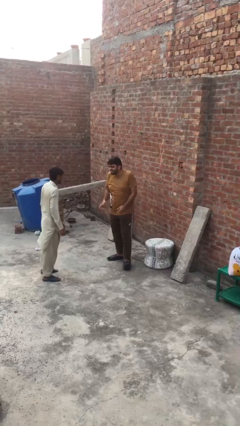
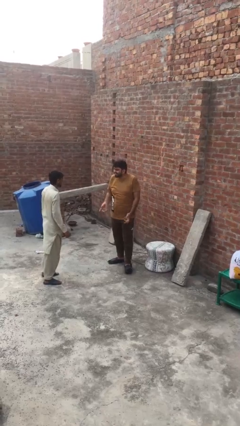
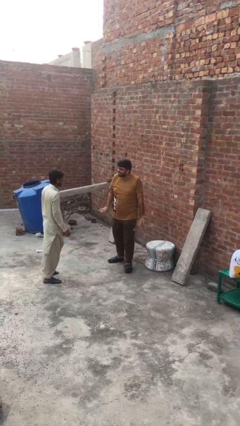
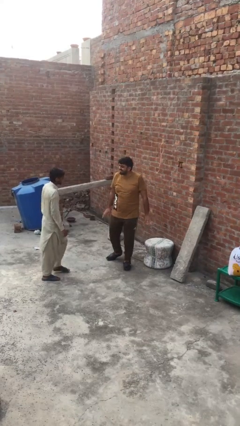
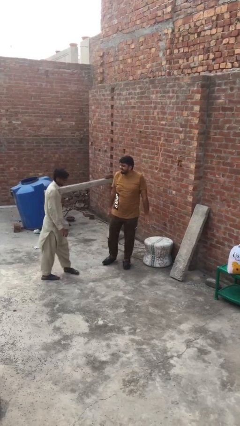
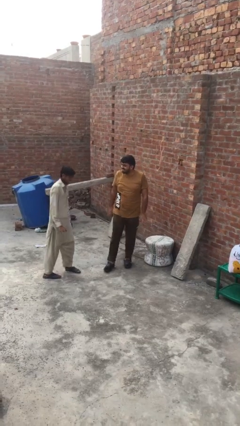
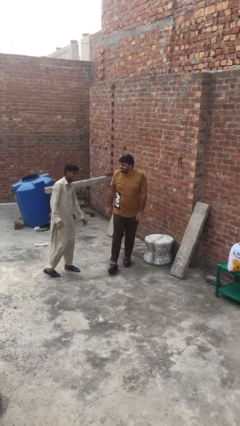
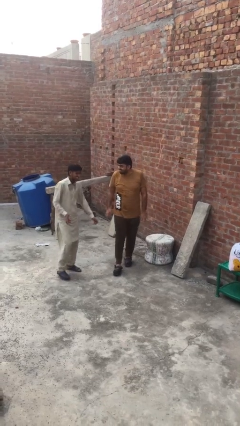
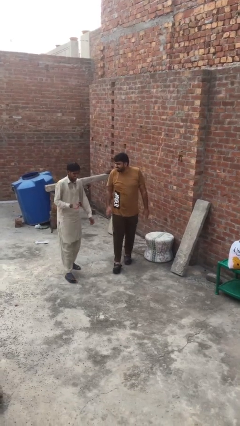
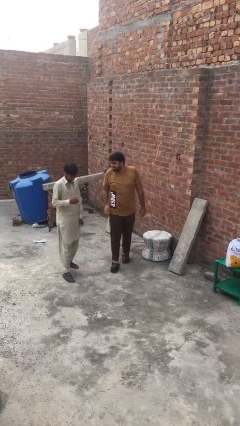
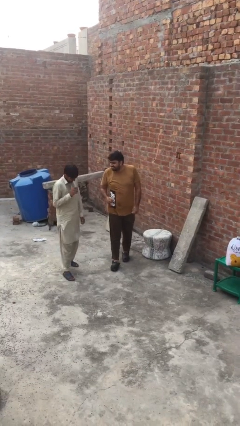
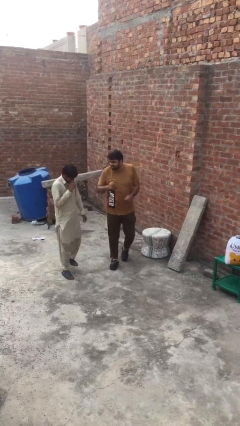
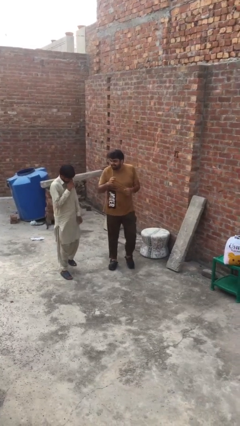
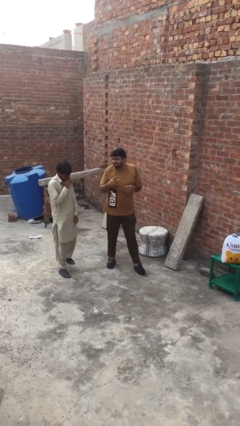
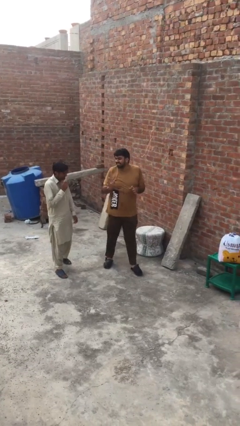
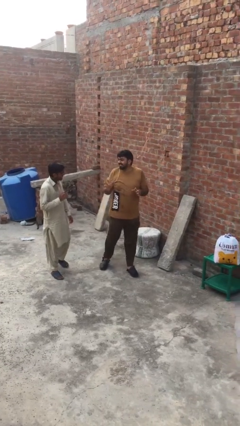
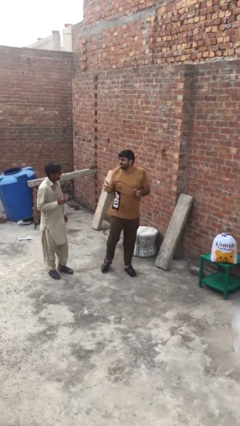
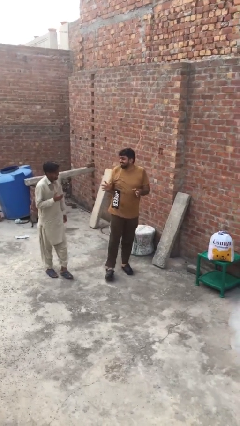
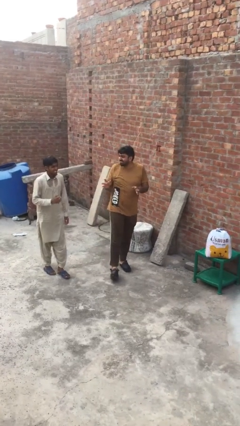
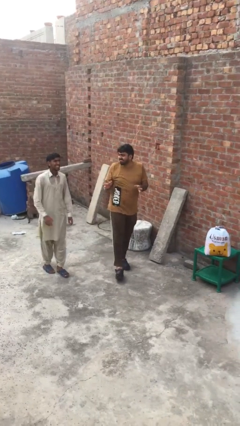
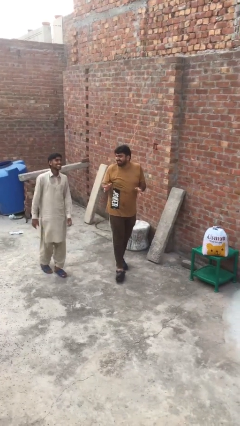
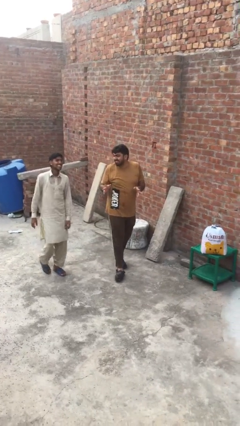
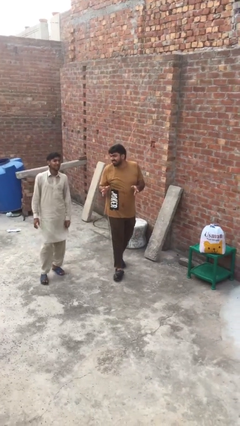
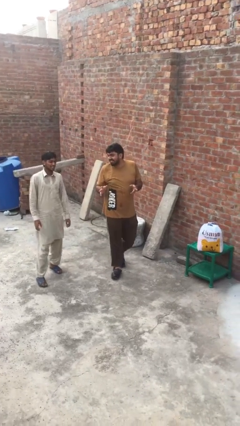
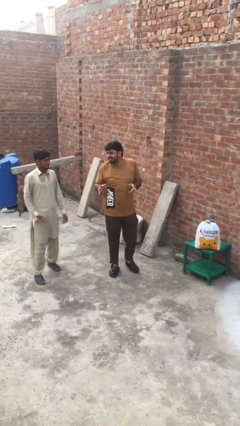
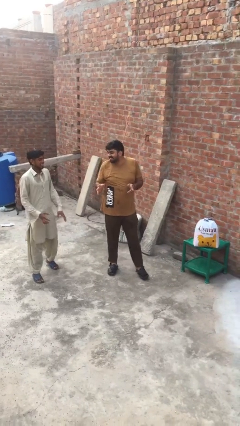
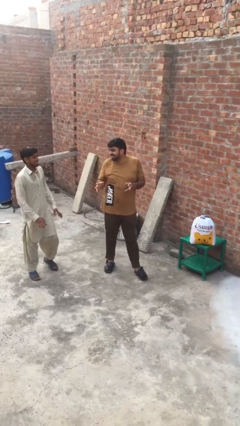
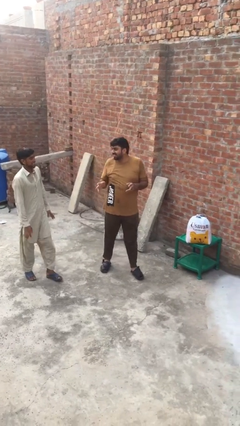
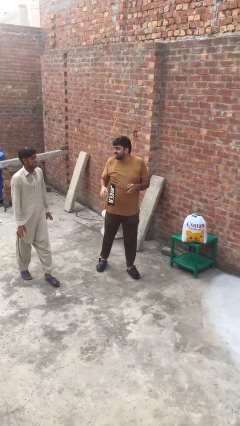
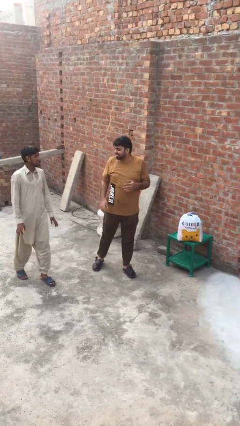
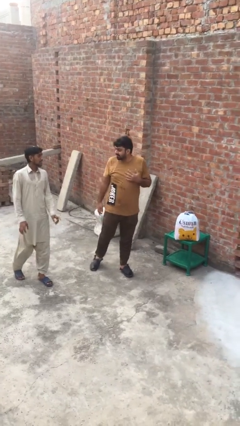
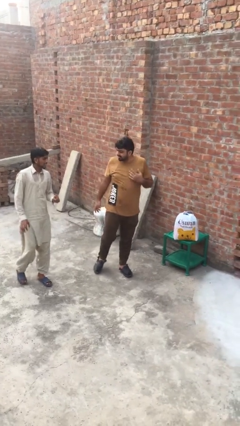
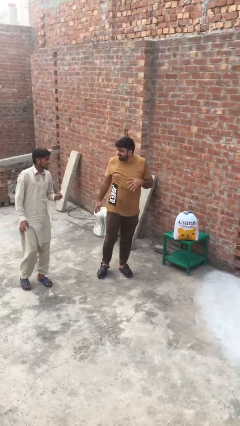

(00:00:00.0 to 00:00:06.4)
person talks to person

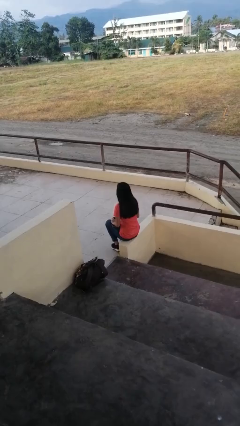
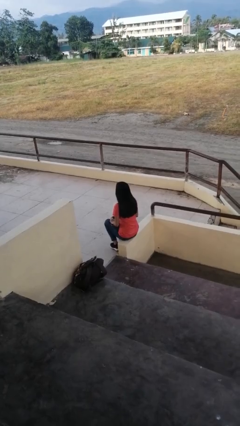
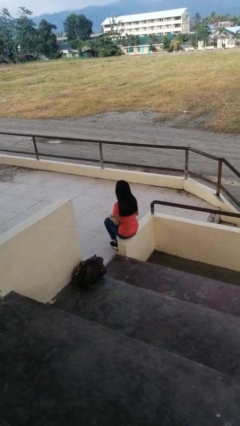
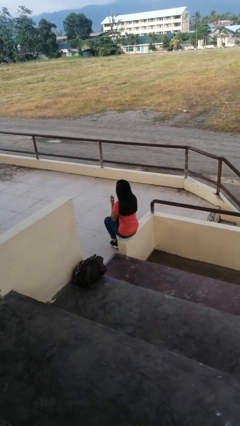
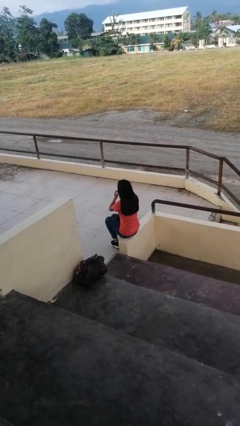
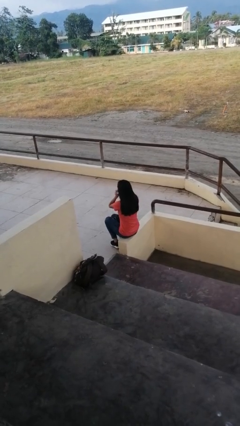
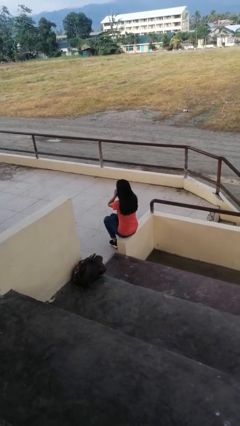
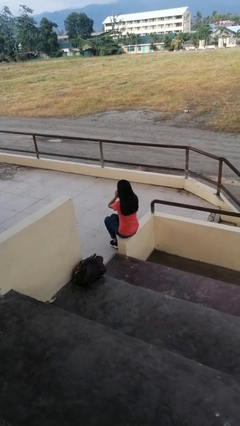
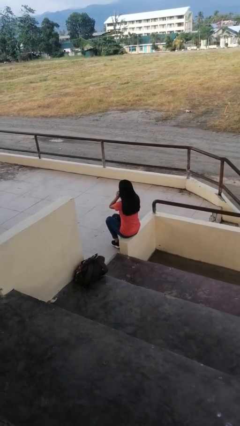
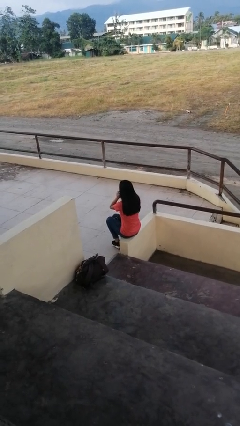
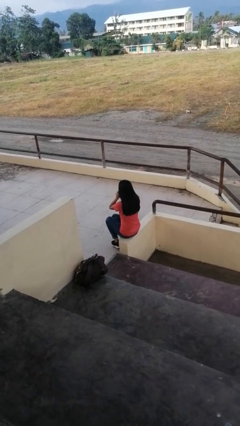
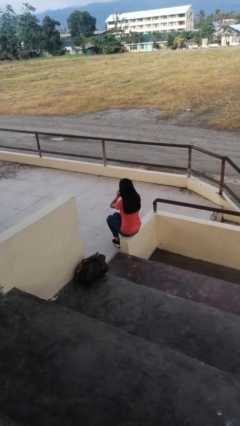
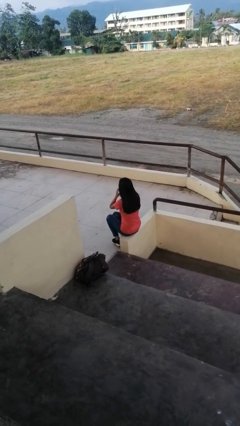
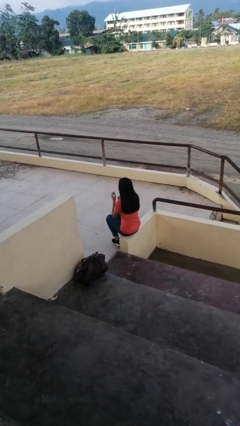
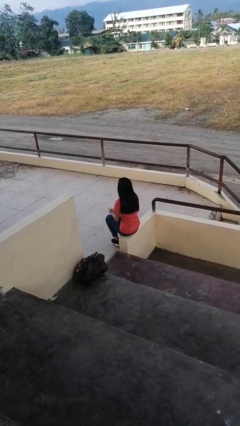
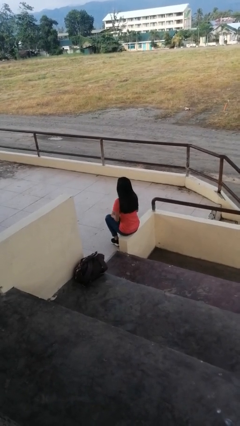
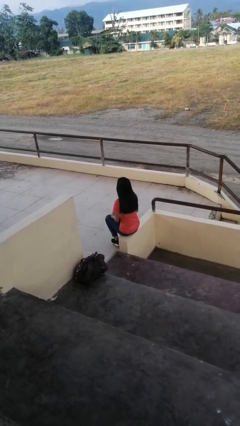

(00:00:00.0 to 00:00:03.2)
person puts on headphones

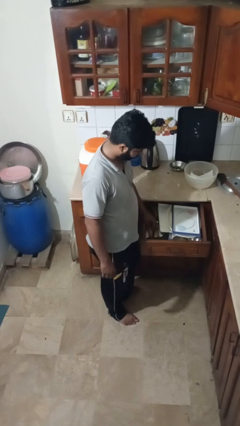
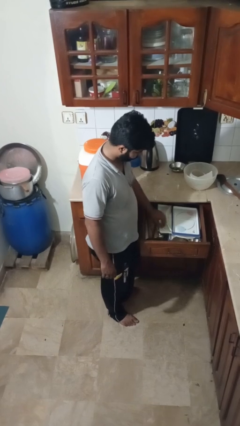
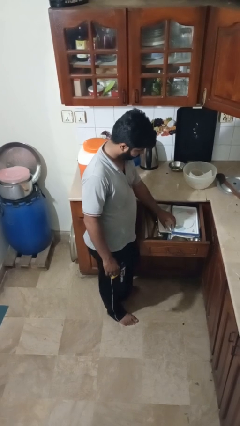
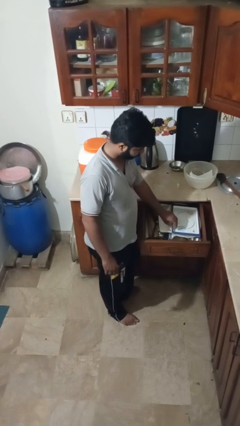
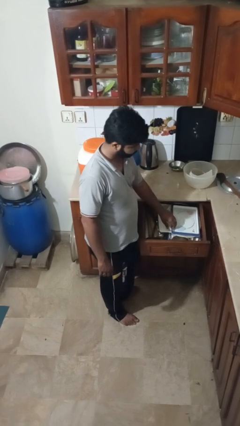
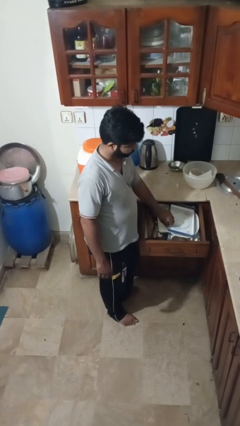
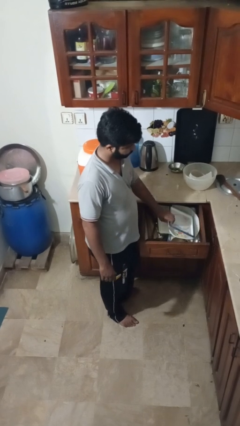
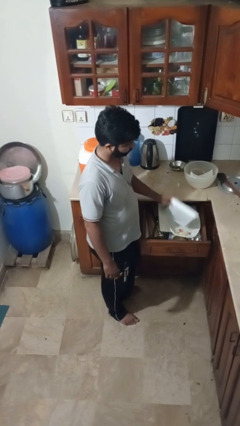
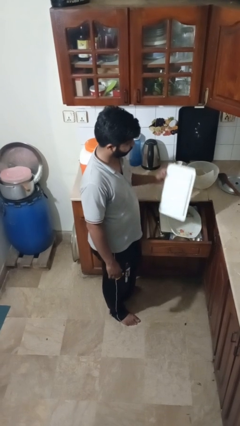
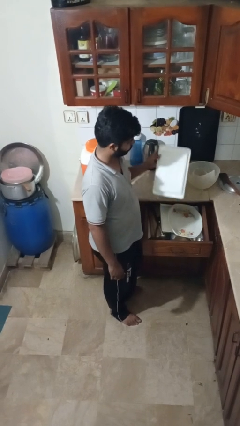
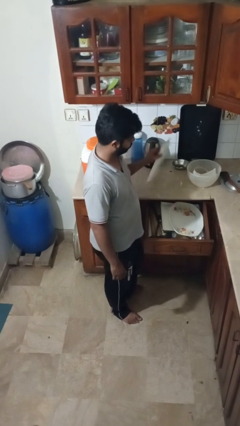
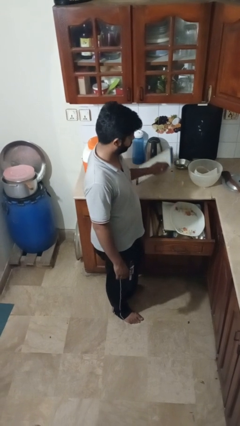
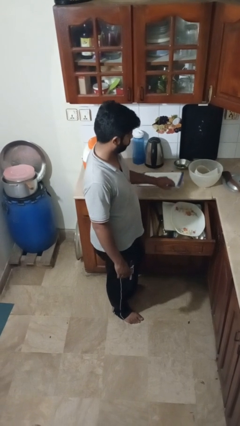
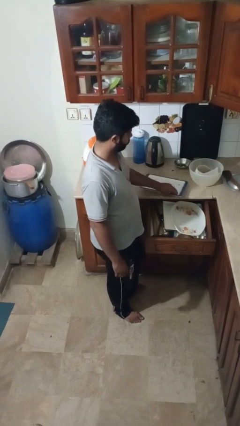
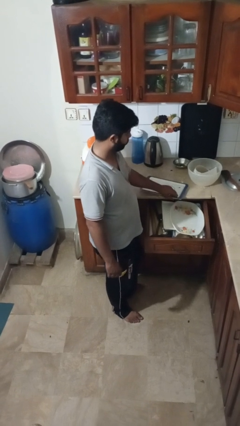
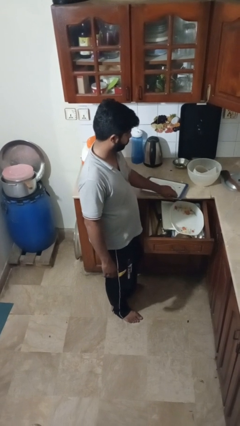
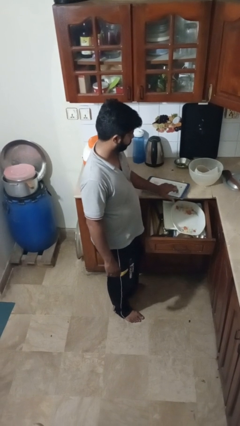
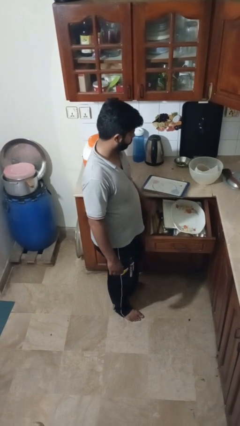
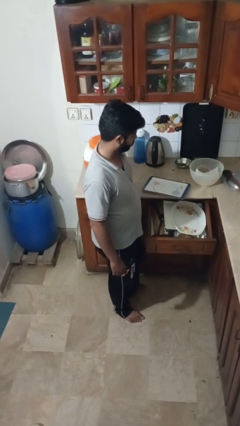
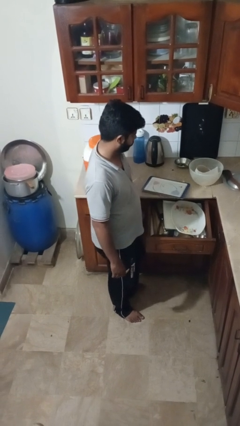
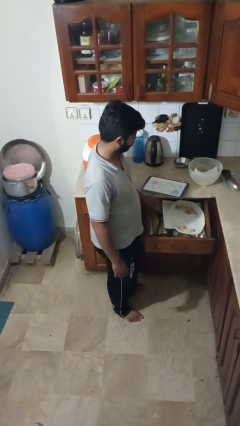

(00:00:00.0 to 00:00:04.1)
person takes object from kitchen drawer

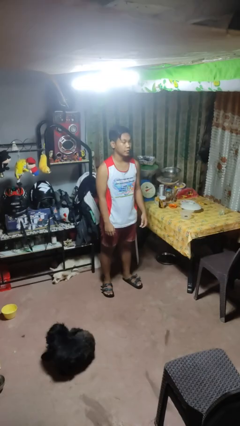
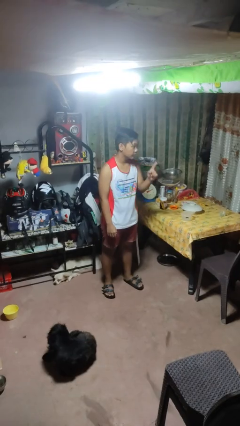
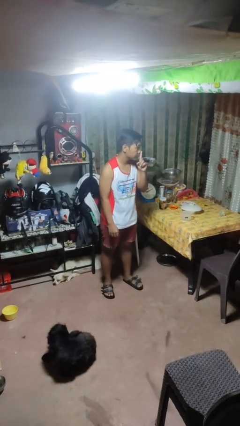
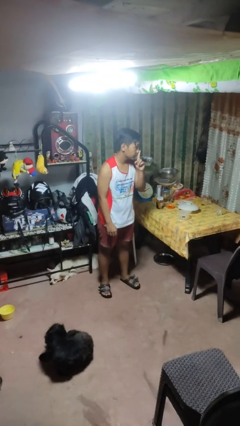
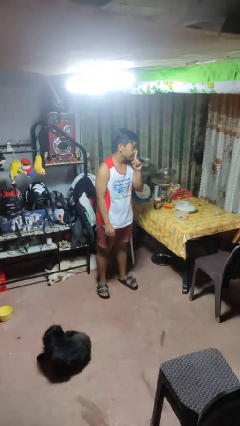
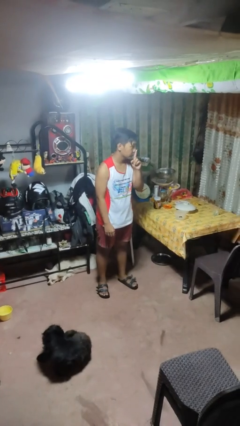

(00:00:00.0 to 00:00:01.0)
person gestures be quiet

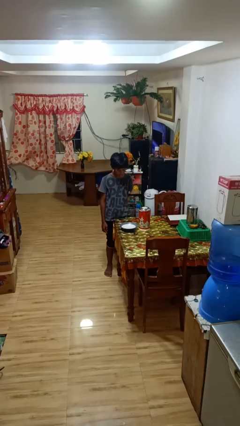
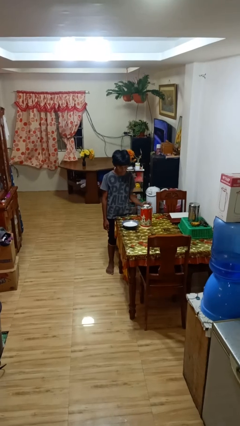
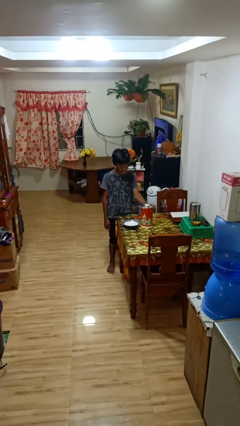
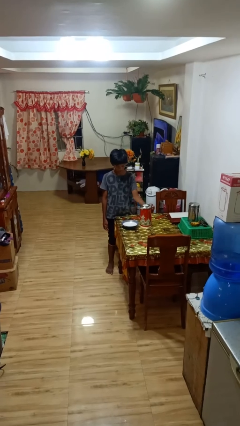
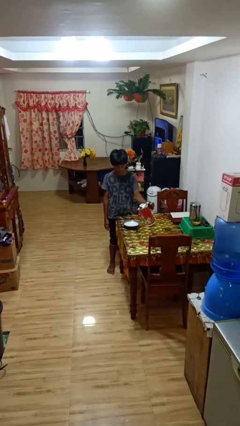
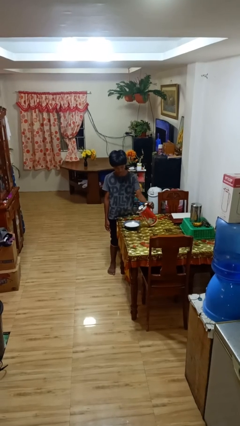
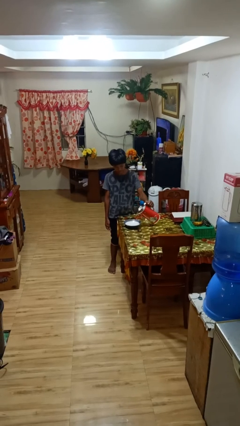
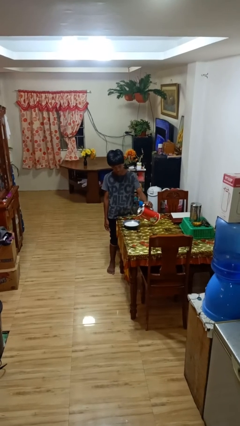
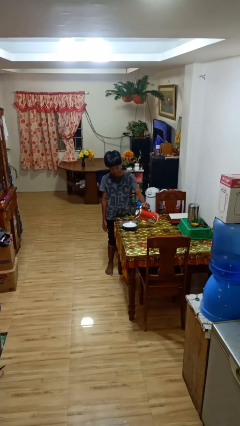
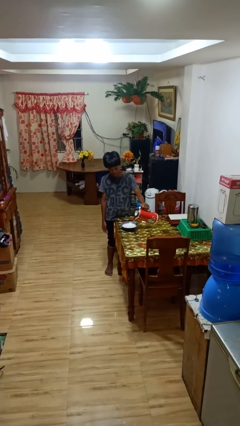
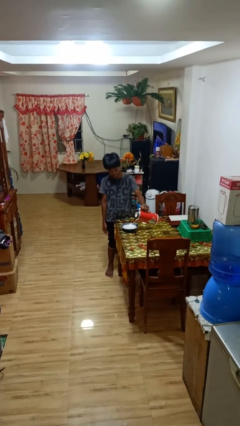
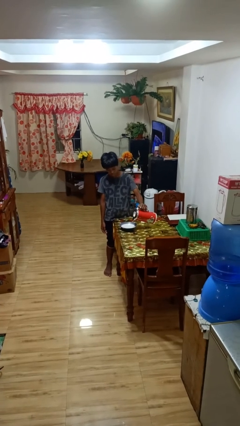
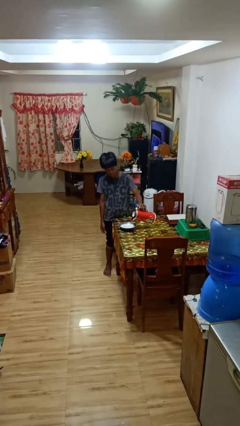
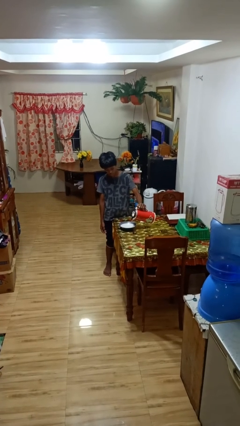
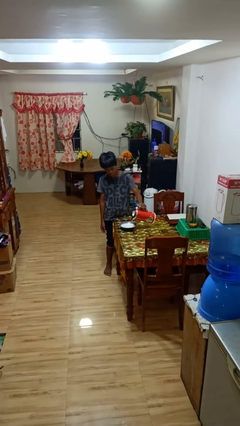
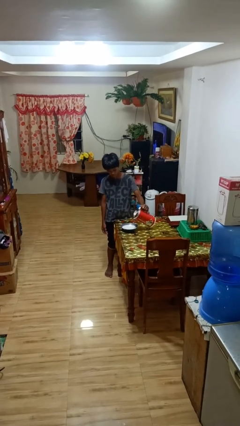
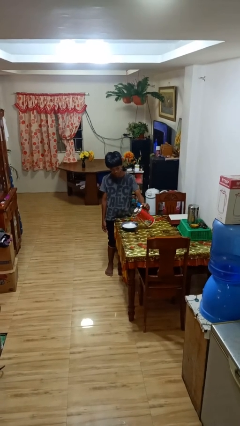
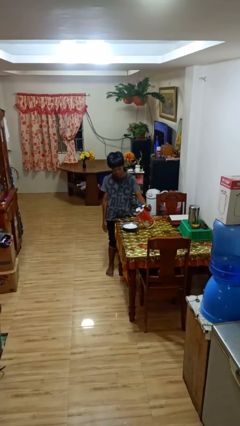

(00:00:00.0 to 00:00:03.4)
person pours into bowl
